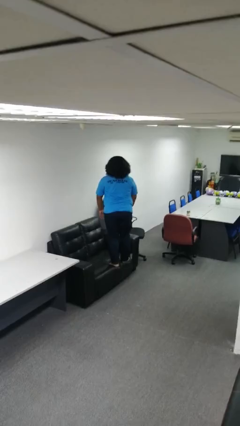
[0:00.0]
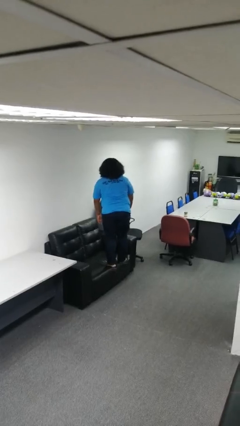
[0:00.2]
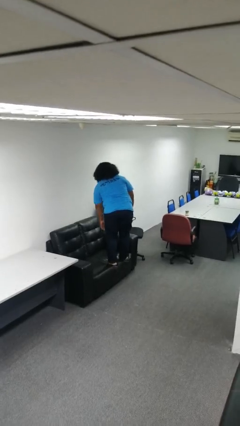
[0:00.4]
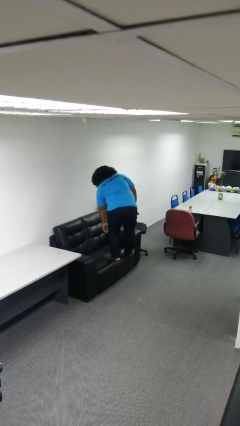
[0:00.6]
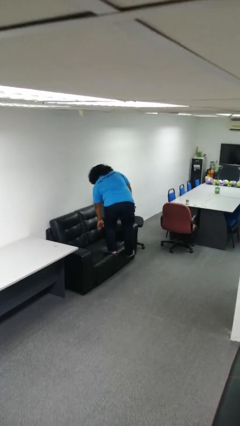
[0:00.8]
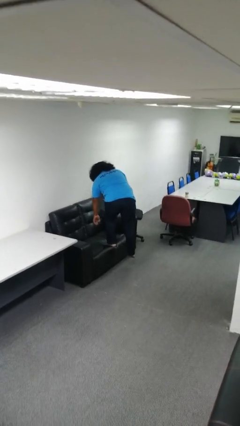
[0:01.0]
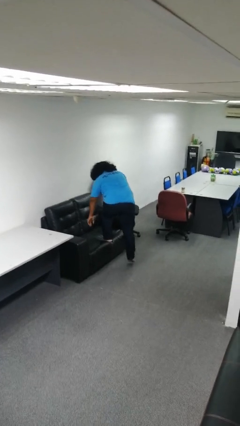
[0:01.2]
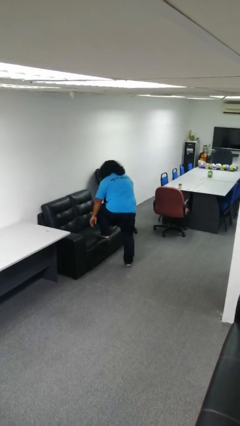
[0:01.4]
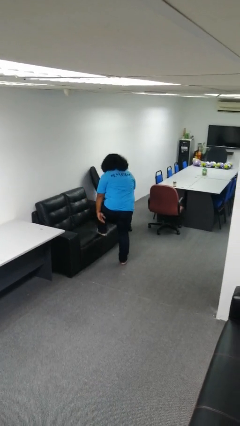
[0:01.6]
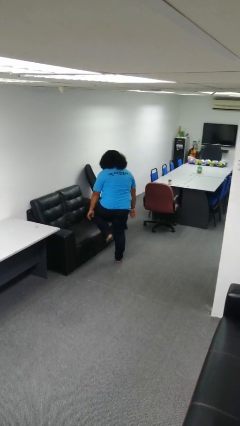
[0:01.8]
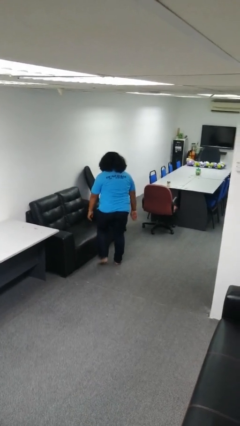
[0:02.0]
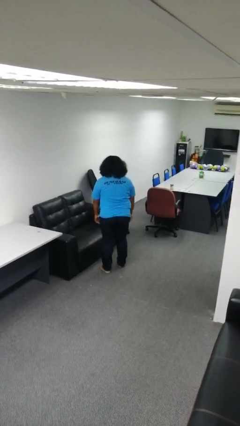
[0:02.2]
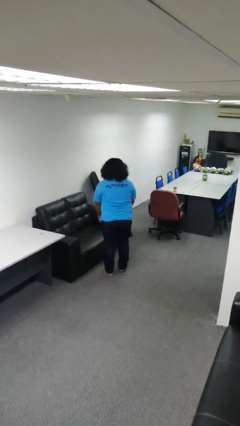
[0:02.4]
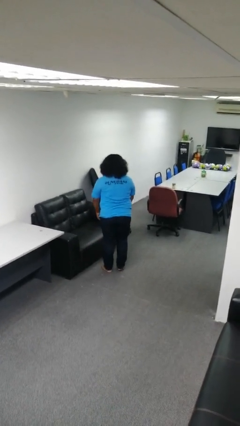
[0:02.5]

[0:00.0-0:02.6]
person climbs off couch

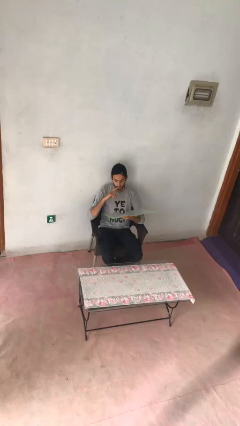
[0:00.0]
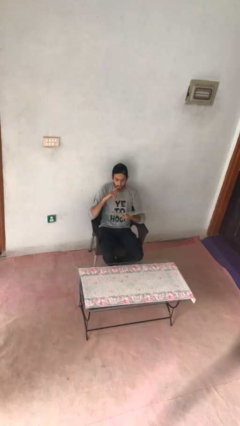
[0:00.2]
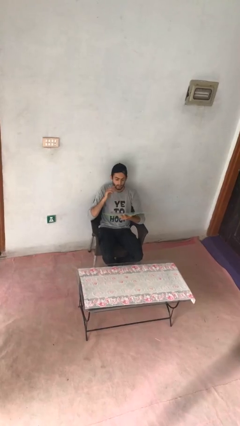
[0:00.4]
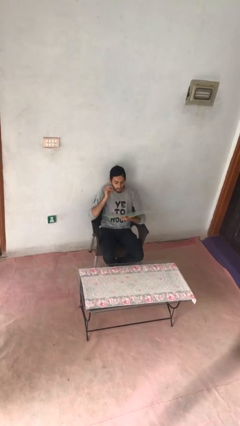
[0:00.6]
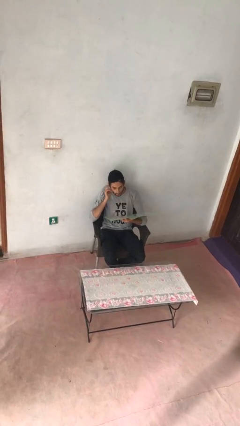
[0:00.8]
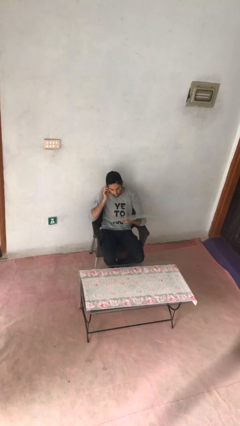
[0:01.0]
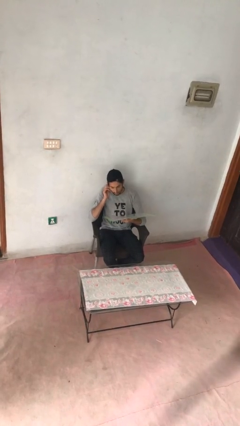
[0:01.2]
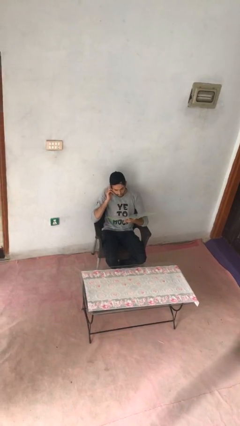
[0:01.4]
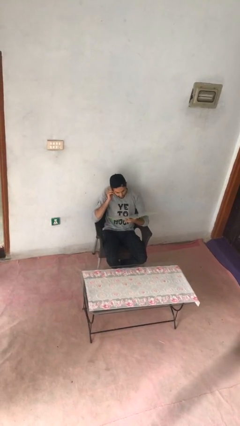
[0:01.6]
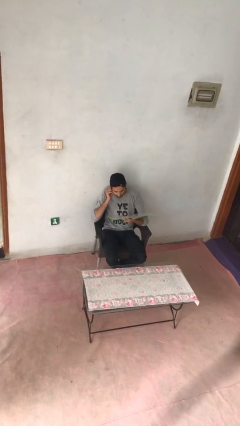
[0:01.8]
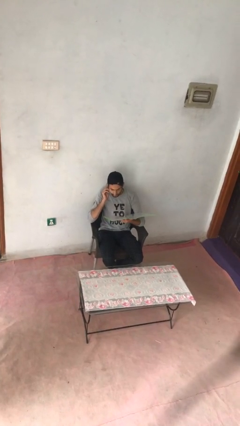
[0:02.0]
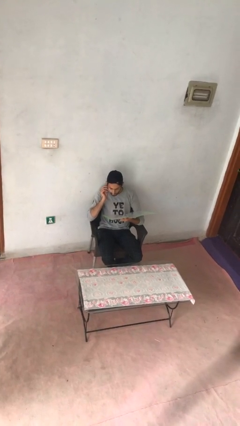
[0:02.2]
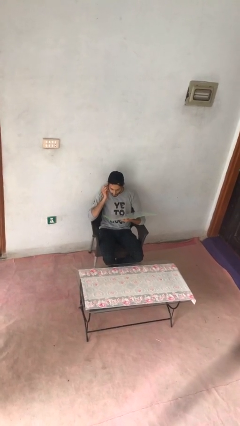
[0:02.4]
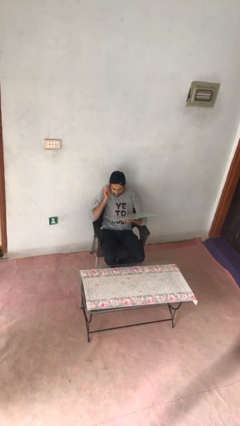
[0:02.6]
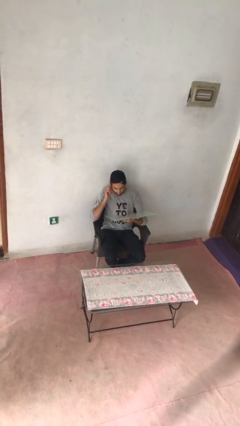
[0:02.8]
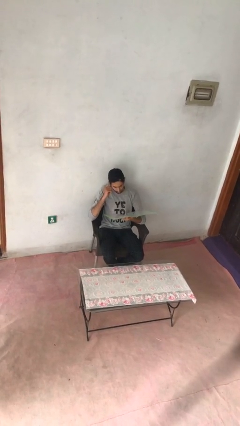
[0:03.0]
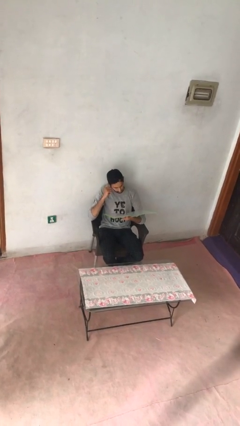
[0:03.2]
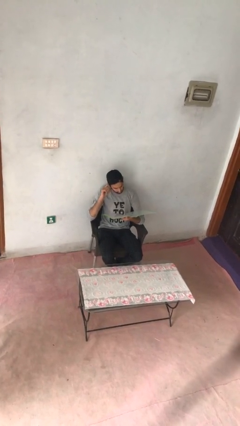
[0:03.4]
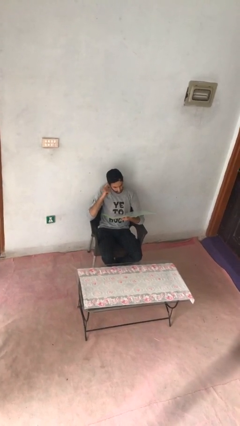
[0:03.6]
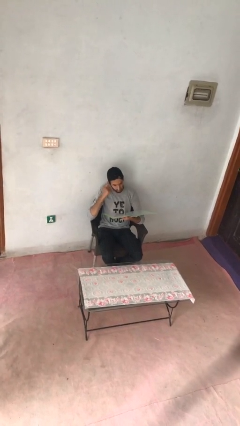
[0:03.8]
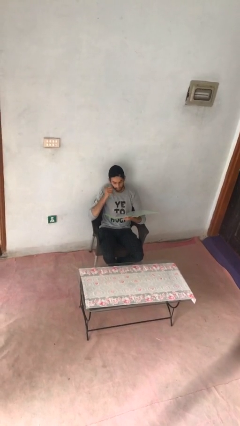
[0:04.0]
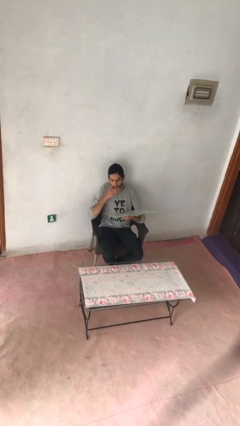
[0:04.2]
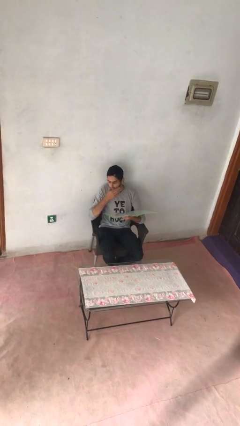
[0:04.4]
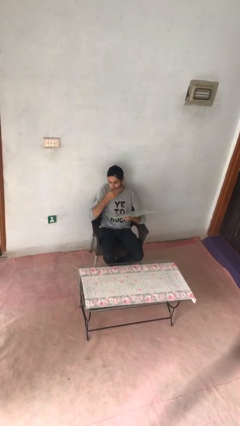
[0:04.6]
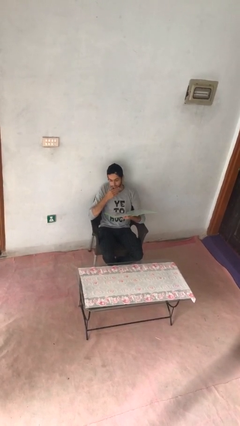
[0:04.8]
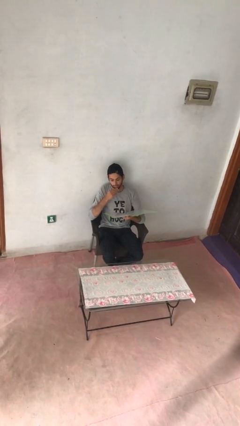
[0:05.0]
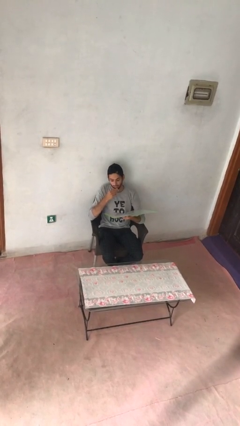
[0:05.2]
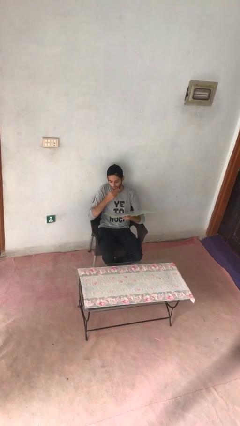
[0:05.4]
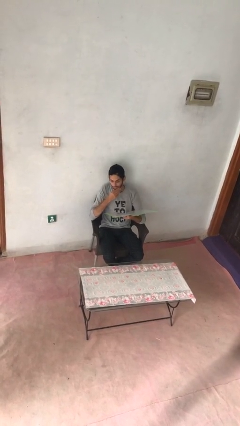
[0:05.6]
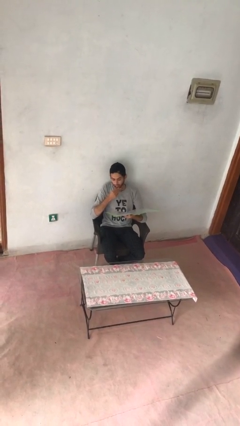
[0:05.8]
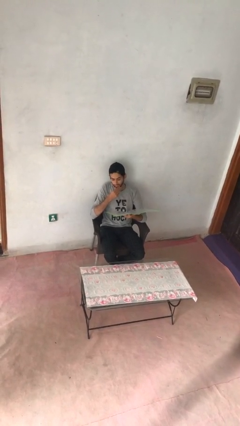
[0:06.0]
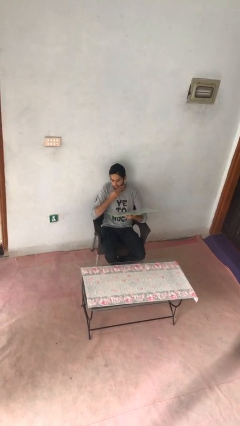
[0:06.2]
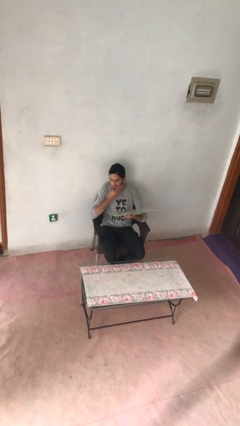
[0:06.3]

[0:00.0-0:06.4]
person reads document

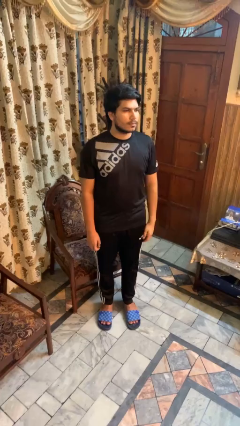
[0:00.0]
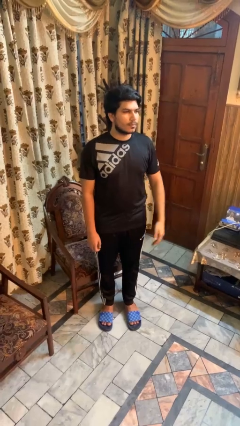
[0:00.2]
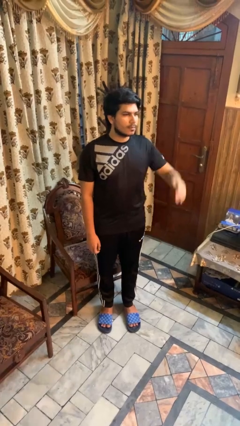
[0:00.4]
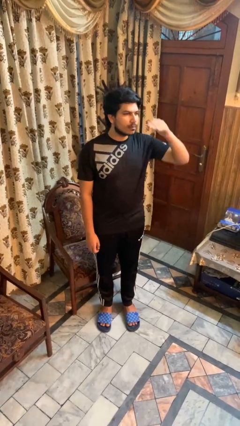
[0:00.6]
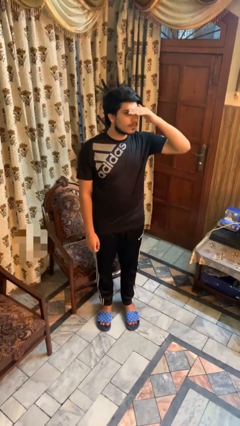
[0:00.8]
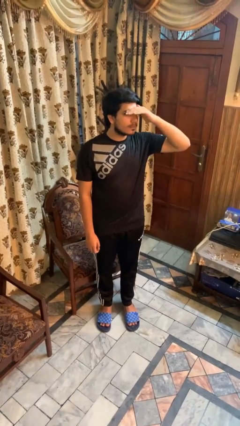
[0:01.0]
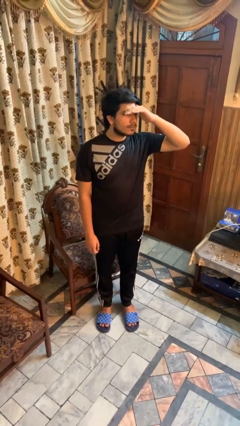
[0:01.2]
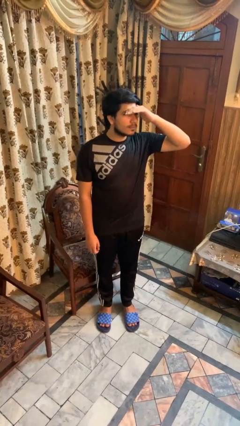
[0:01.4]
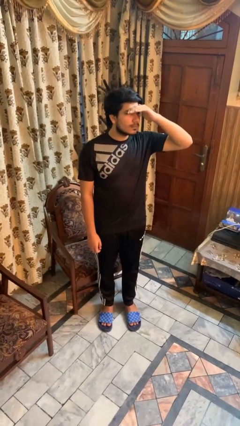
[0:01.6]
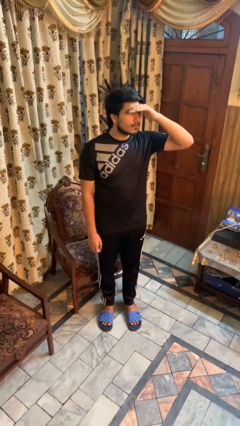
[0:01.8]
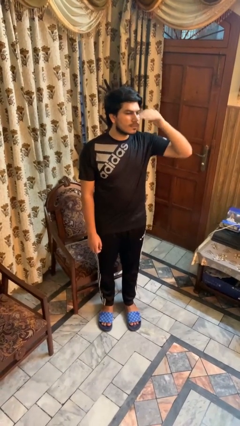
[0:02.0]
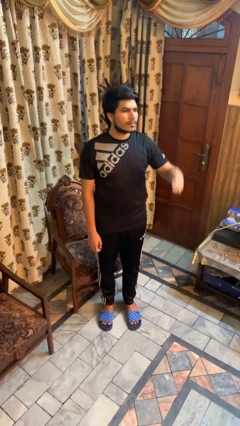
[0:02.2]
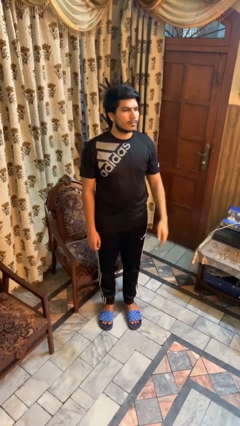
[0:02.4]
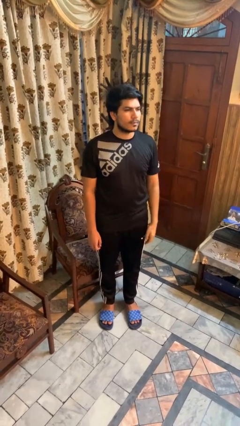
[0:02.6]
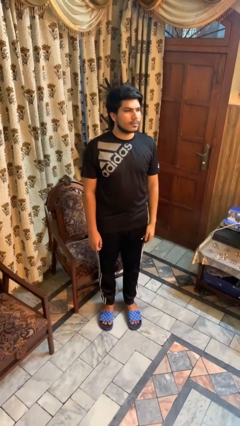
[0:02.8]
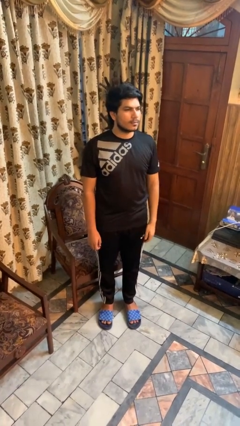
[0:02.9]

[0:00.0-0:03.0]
person shades eyes

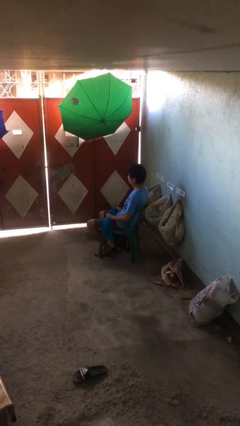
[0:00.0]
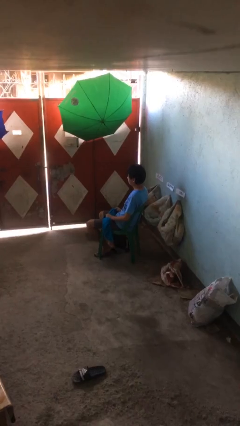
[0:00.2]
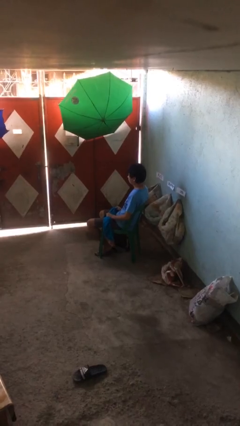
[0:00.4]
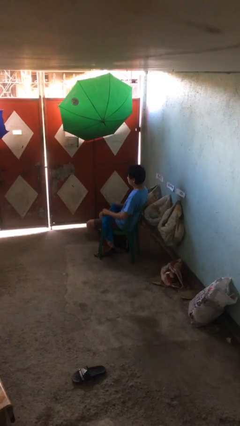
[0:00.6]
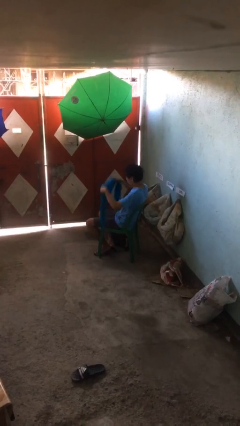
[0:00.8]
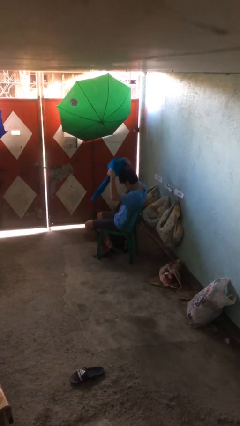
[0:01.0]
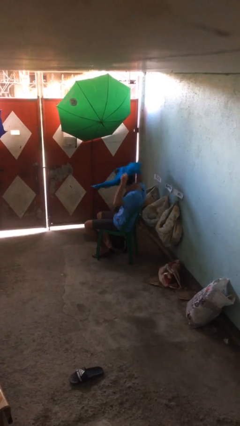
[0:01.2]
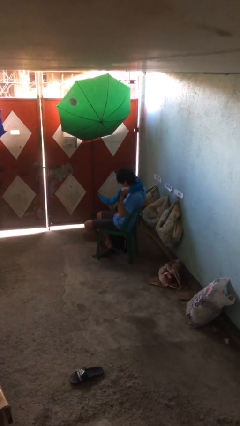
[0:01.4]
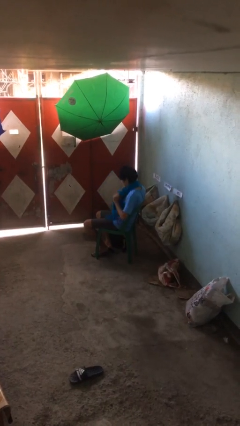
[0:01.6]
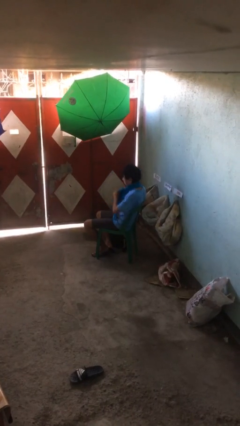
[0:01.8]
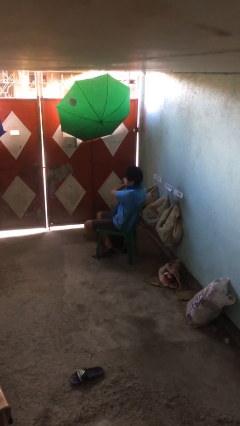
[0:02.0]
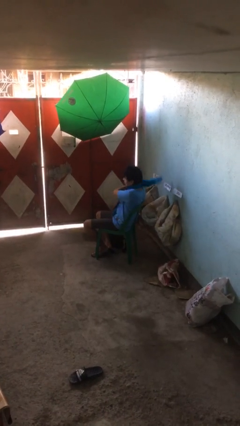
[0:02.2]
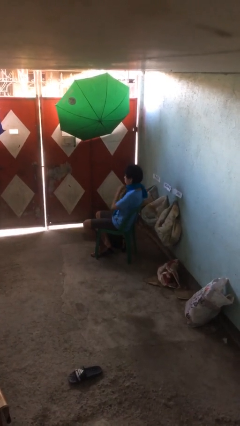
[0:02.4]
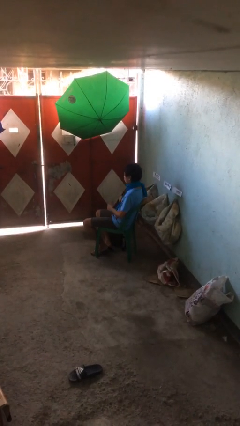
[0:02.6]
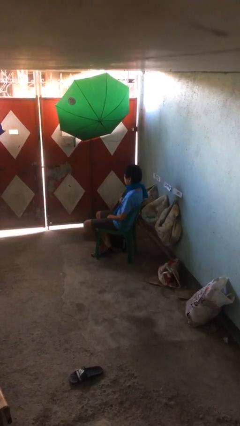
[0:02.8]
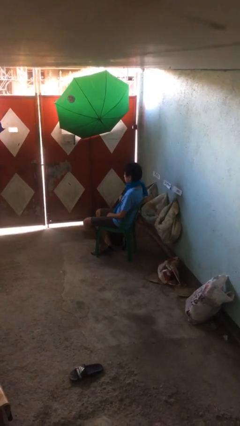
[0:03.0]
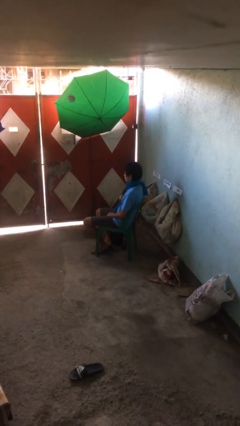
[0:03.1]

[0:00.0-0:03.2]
person puts on scarf

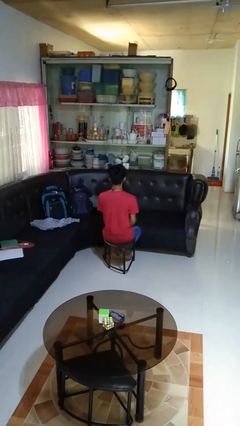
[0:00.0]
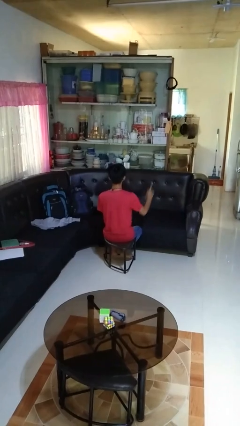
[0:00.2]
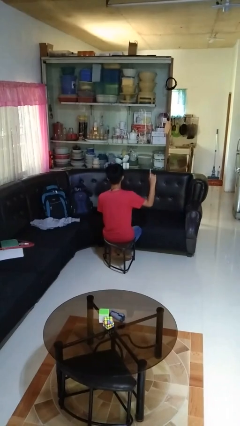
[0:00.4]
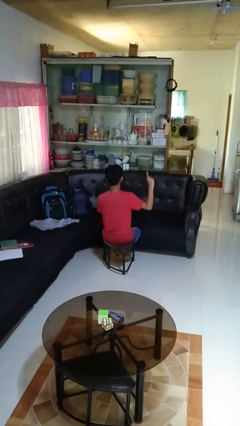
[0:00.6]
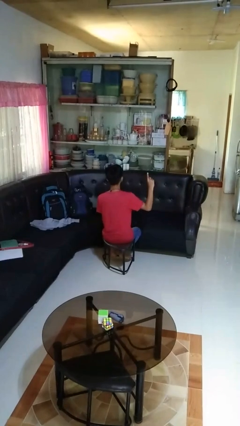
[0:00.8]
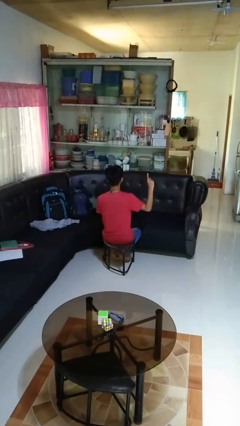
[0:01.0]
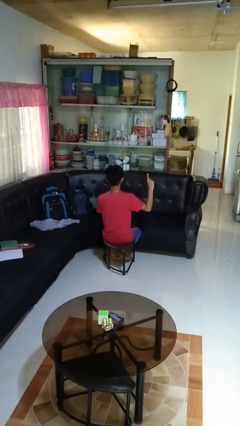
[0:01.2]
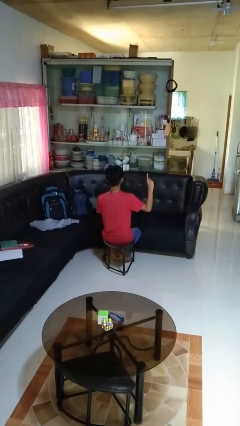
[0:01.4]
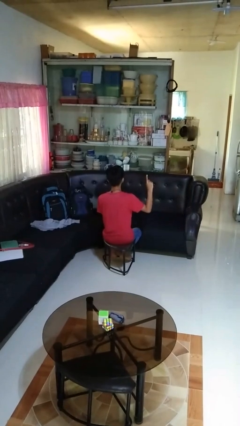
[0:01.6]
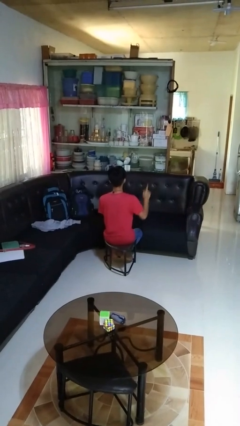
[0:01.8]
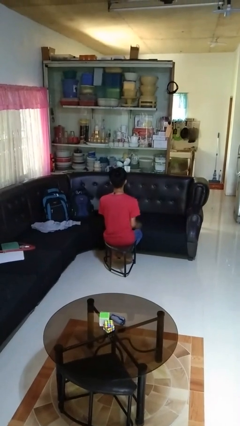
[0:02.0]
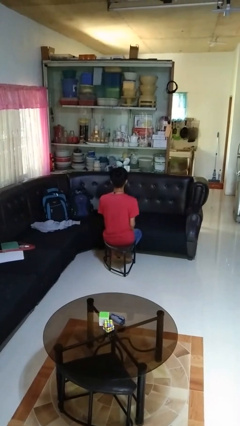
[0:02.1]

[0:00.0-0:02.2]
person gestures number one

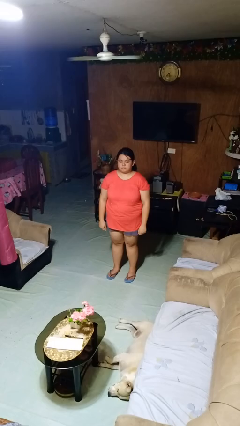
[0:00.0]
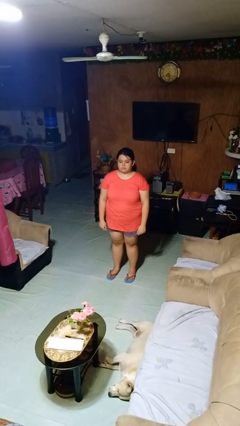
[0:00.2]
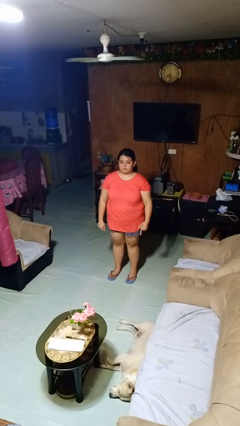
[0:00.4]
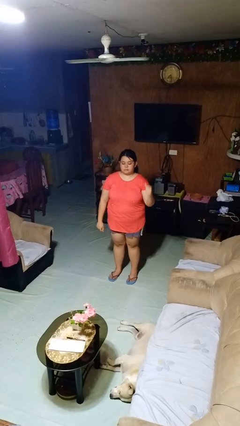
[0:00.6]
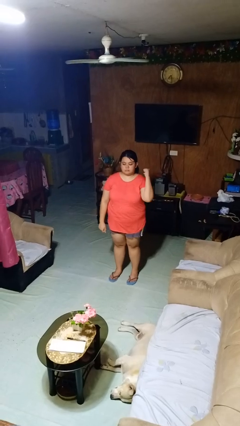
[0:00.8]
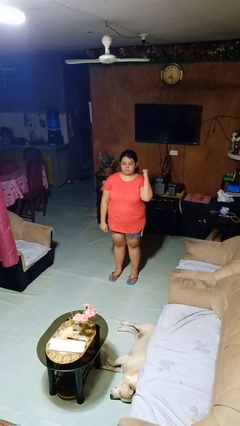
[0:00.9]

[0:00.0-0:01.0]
person gestures behind me
